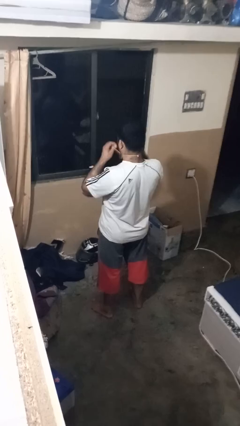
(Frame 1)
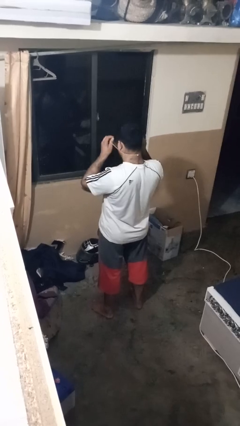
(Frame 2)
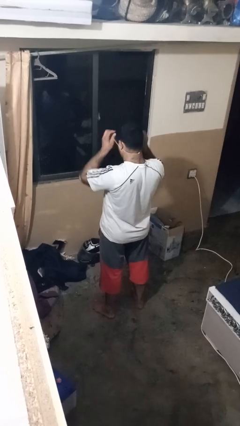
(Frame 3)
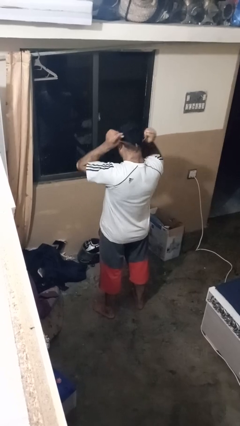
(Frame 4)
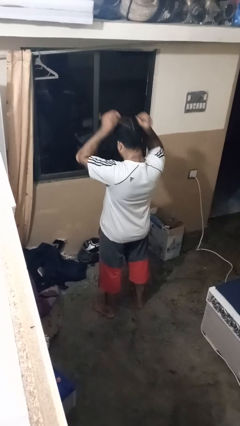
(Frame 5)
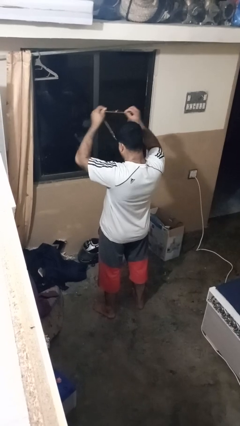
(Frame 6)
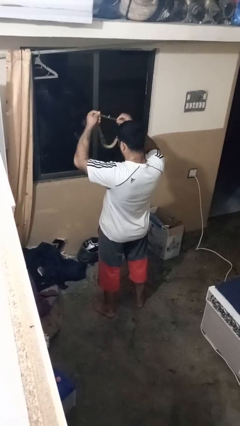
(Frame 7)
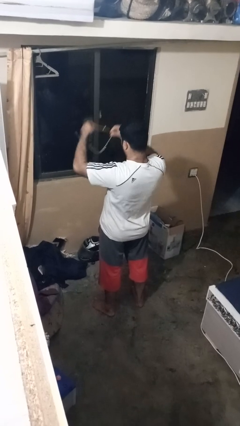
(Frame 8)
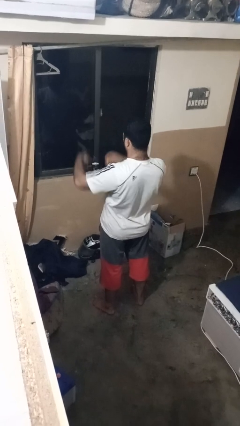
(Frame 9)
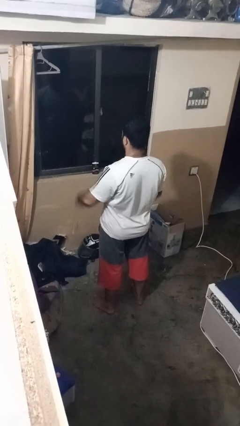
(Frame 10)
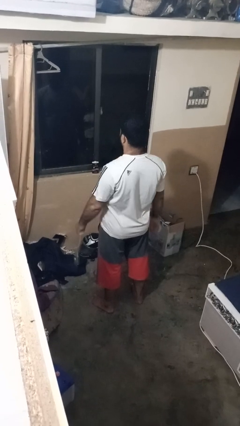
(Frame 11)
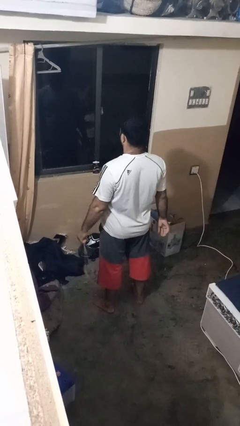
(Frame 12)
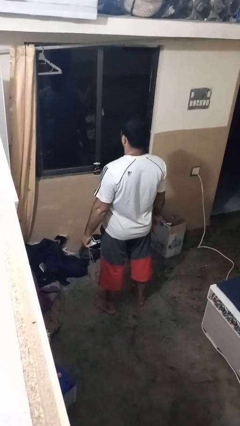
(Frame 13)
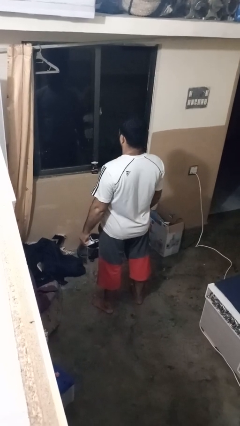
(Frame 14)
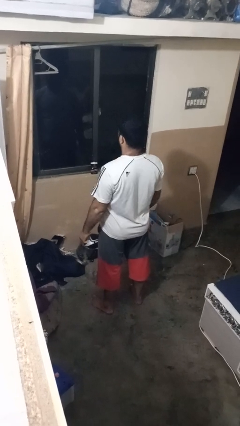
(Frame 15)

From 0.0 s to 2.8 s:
person takes off necklace

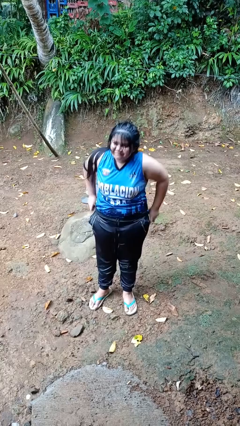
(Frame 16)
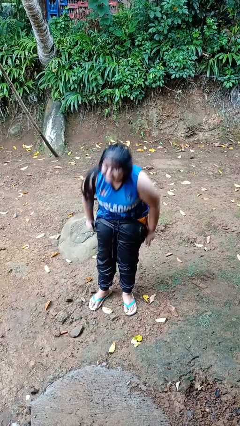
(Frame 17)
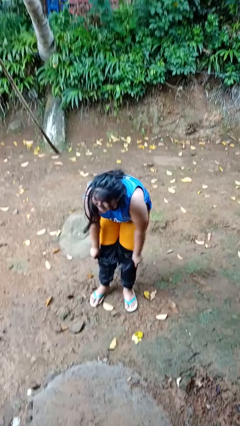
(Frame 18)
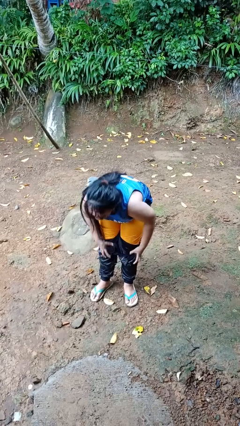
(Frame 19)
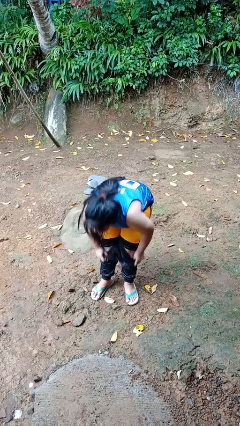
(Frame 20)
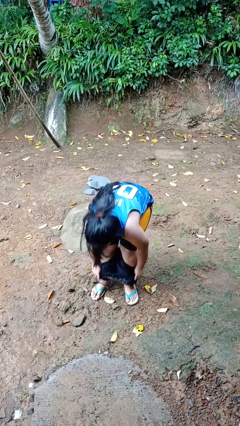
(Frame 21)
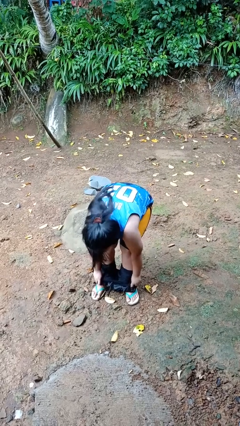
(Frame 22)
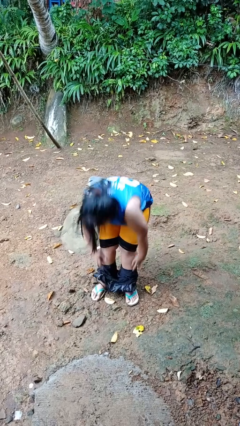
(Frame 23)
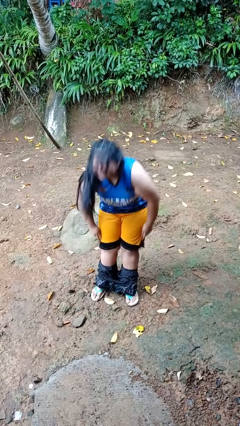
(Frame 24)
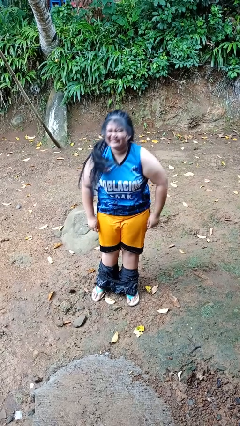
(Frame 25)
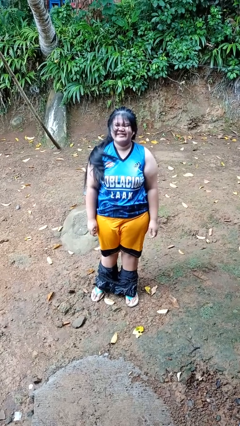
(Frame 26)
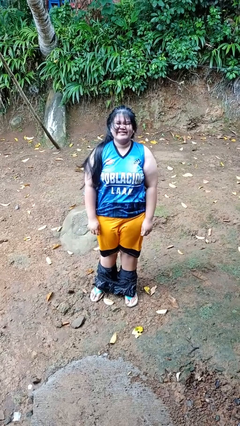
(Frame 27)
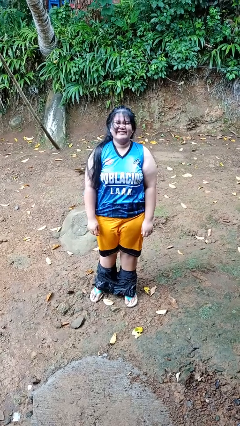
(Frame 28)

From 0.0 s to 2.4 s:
person takes off pants

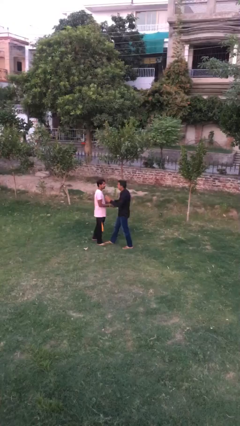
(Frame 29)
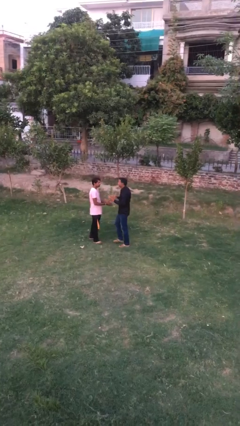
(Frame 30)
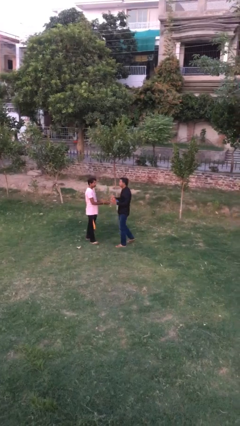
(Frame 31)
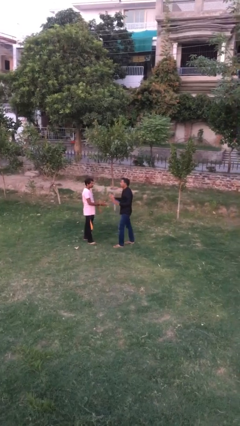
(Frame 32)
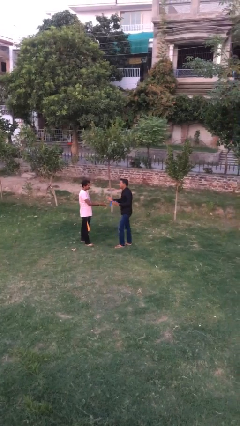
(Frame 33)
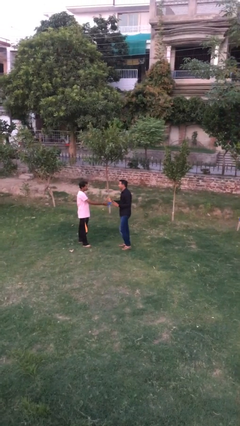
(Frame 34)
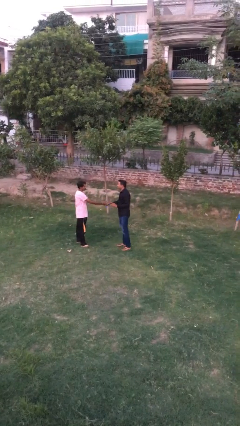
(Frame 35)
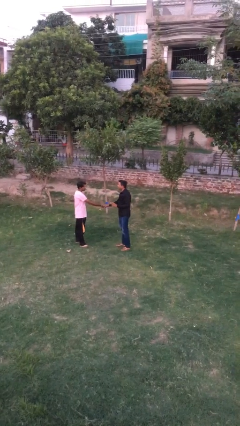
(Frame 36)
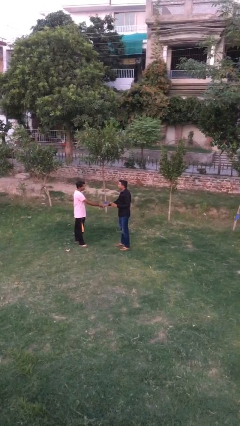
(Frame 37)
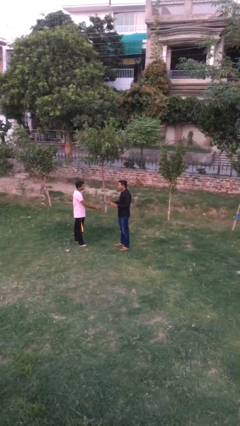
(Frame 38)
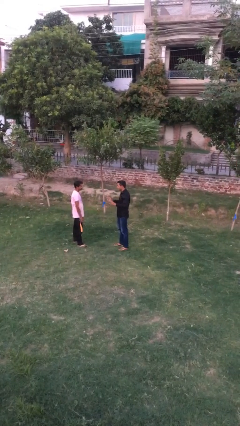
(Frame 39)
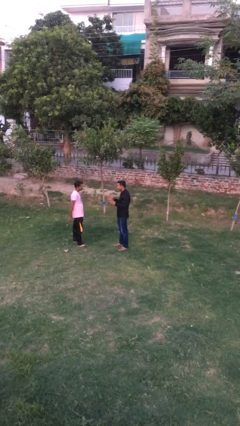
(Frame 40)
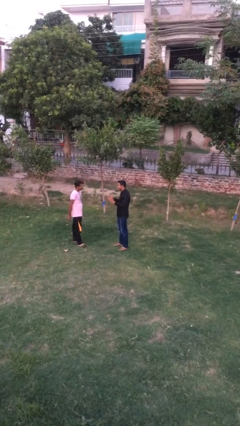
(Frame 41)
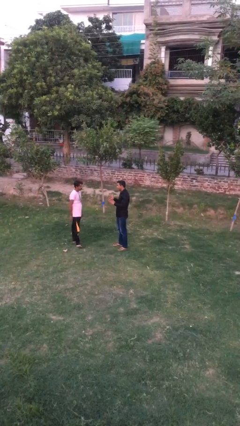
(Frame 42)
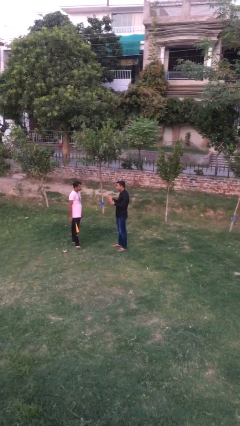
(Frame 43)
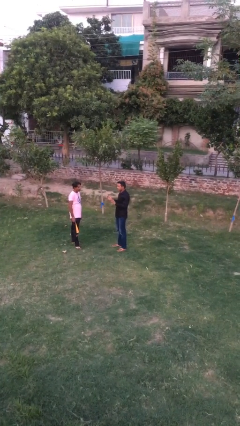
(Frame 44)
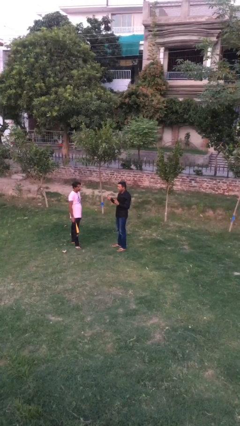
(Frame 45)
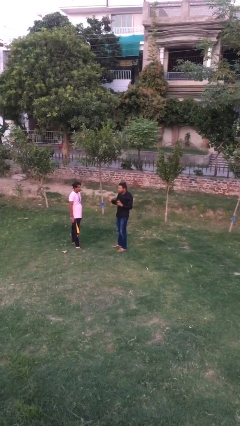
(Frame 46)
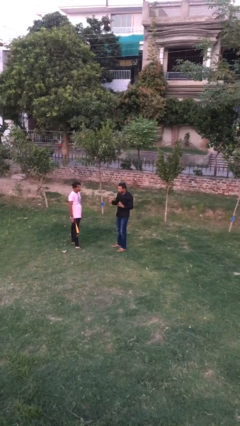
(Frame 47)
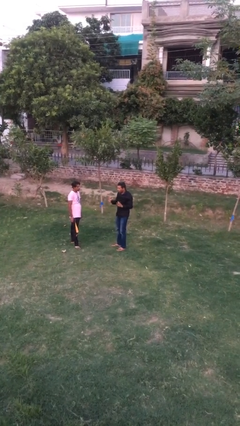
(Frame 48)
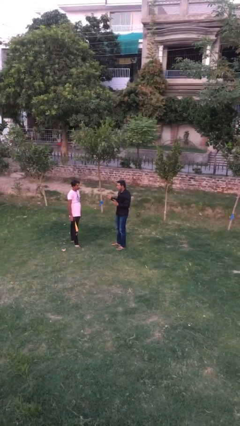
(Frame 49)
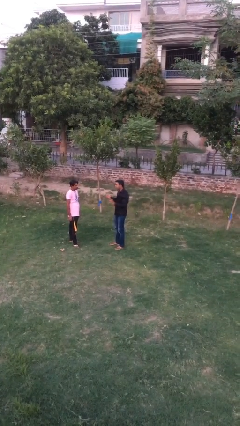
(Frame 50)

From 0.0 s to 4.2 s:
person talks to person

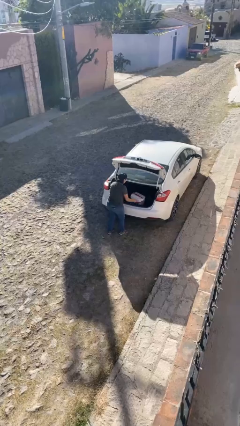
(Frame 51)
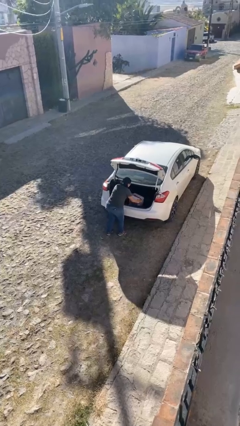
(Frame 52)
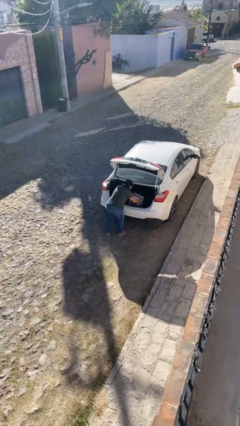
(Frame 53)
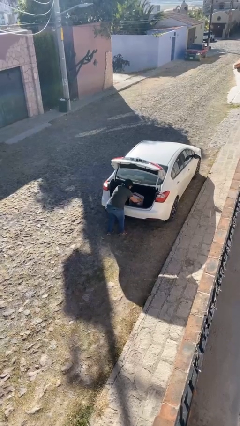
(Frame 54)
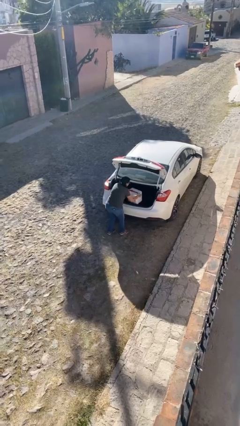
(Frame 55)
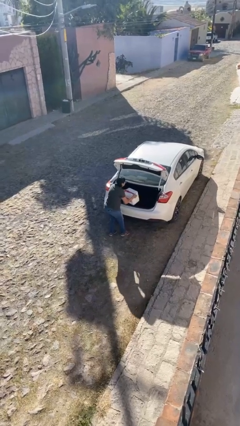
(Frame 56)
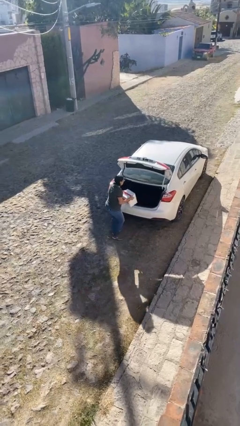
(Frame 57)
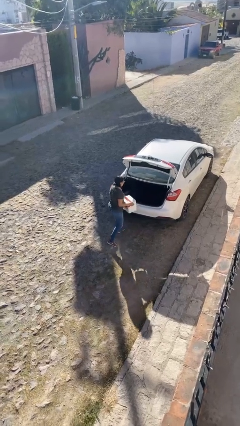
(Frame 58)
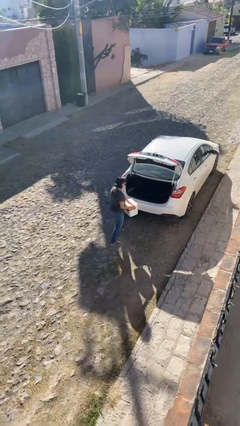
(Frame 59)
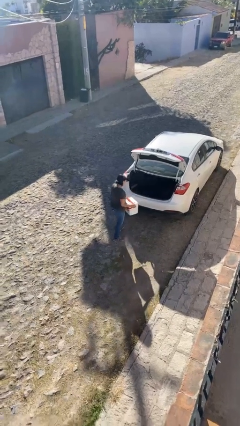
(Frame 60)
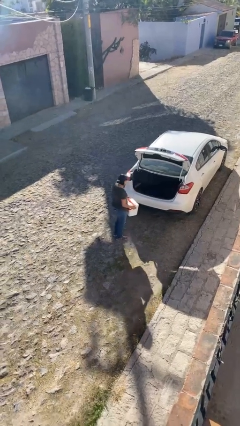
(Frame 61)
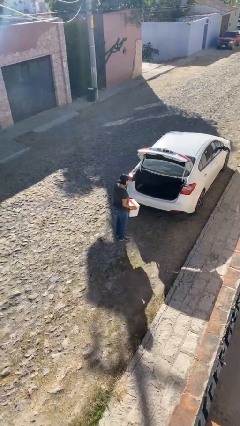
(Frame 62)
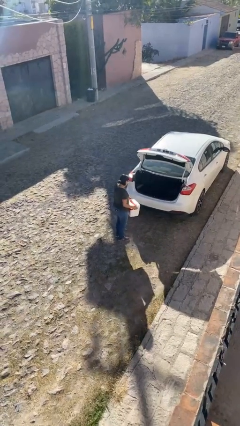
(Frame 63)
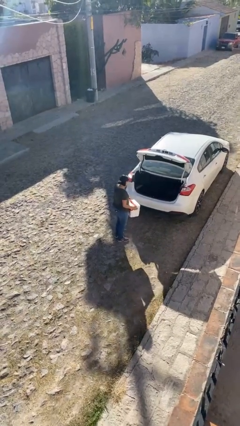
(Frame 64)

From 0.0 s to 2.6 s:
person unloads car

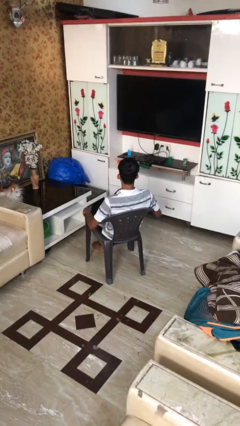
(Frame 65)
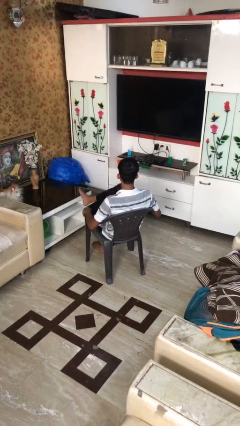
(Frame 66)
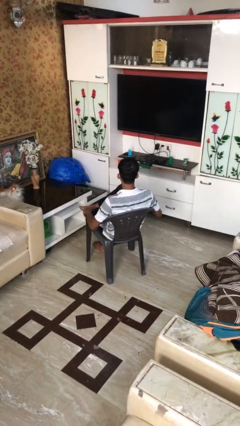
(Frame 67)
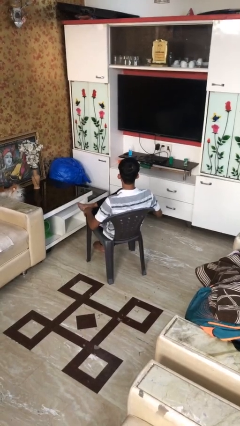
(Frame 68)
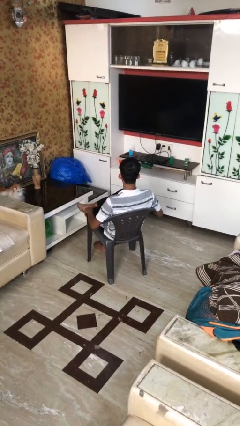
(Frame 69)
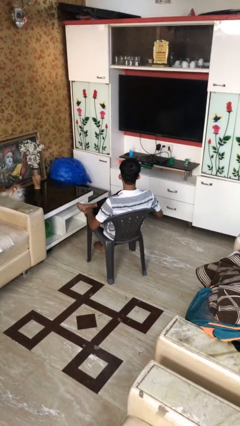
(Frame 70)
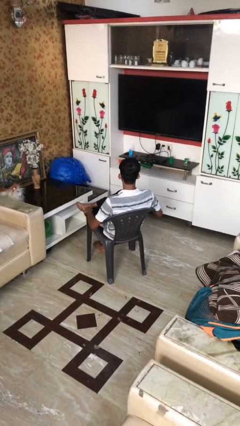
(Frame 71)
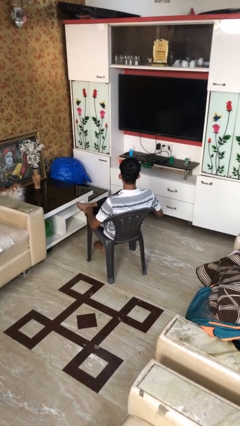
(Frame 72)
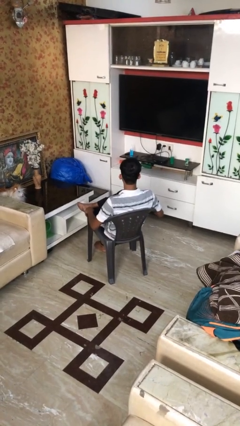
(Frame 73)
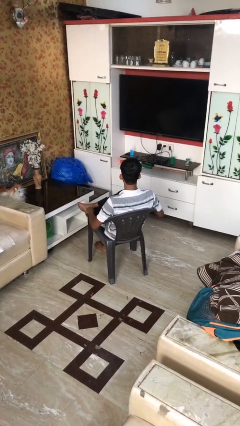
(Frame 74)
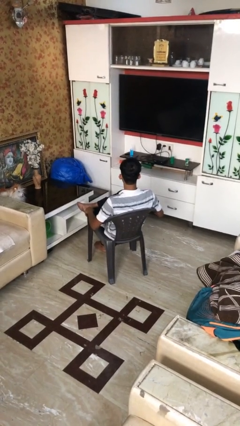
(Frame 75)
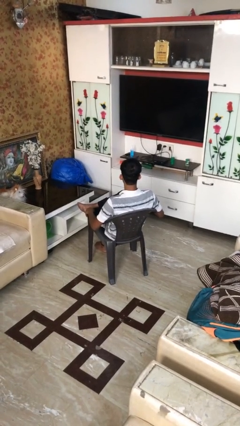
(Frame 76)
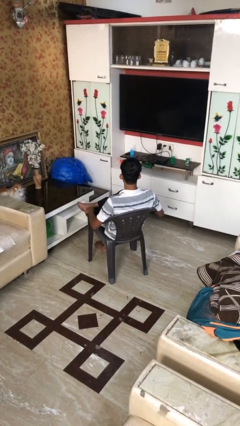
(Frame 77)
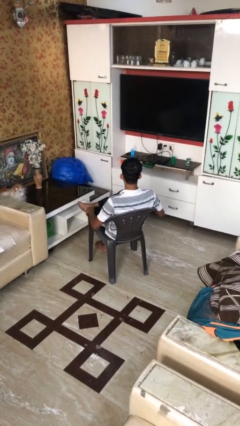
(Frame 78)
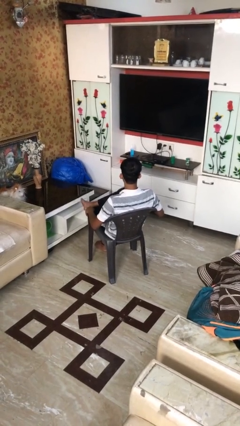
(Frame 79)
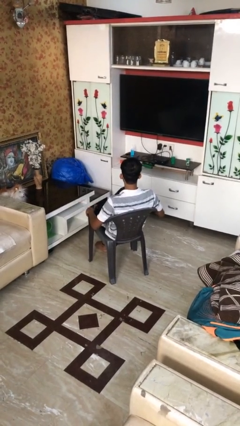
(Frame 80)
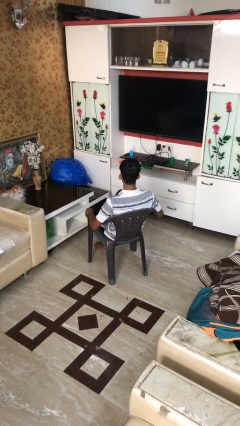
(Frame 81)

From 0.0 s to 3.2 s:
person crosses legs

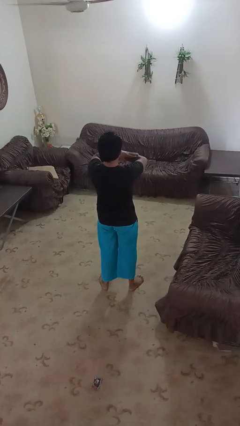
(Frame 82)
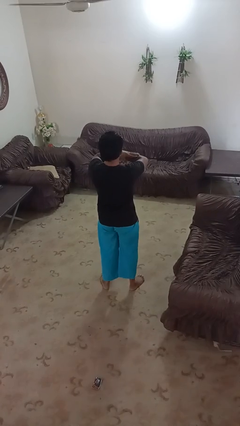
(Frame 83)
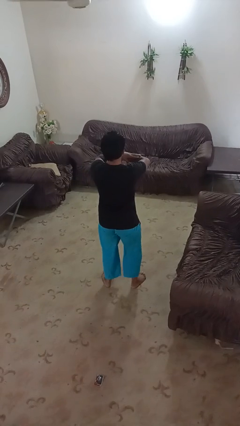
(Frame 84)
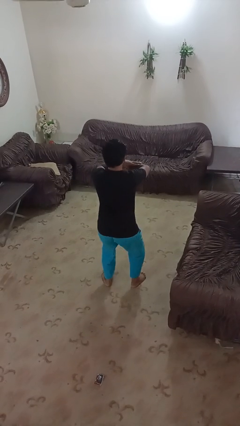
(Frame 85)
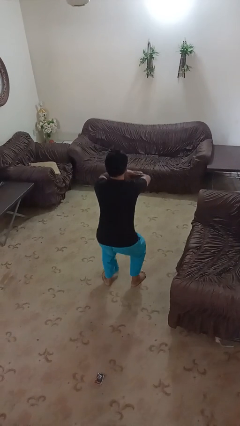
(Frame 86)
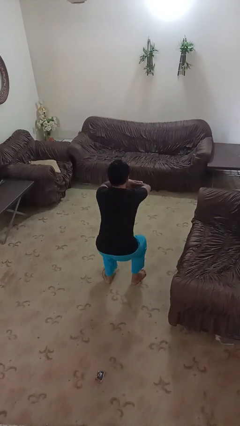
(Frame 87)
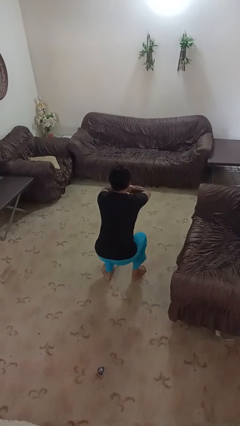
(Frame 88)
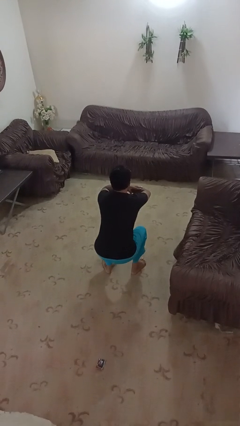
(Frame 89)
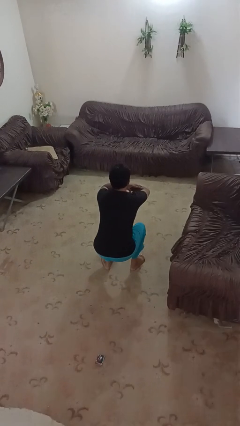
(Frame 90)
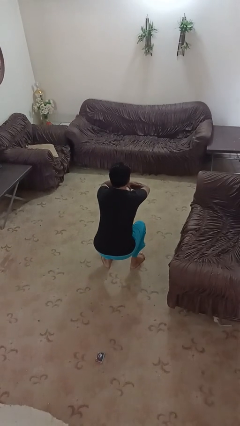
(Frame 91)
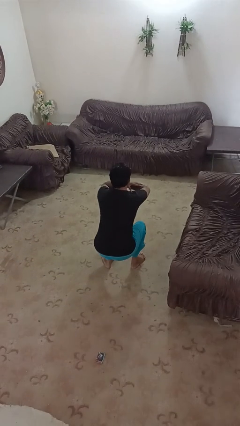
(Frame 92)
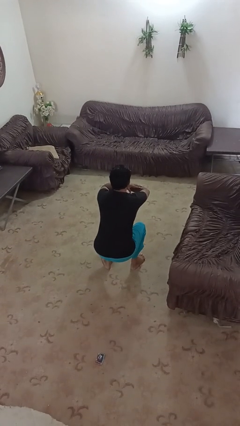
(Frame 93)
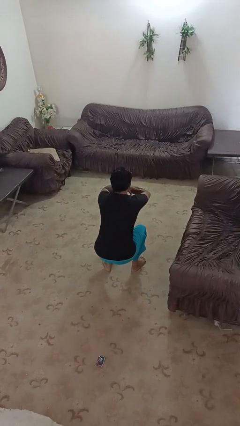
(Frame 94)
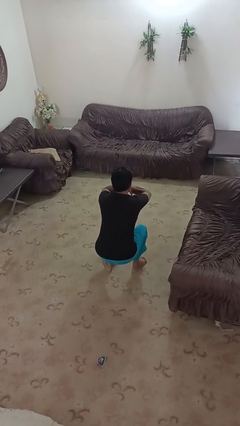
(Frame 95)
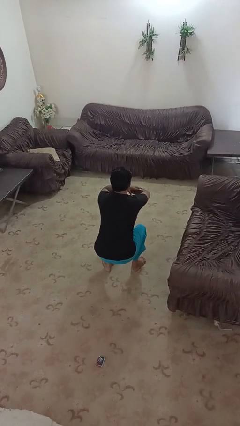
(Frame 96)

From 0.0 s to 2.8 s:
person squats
